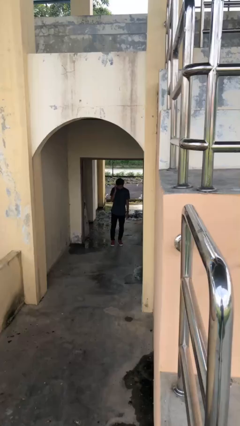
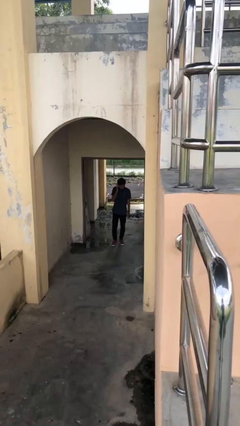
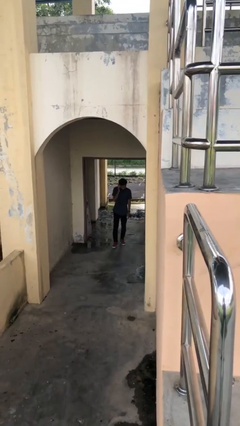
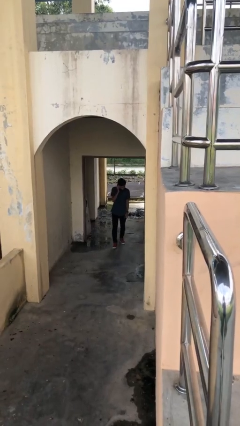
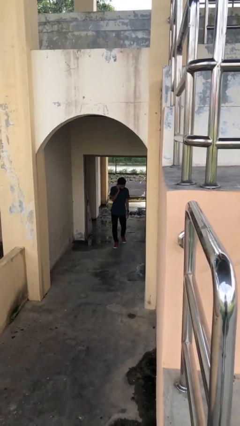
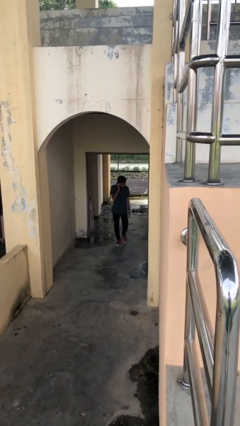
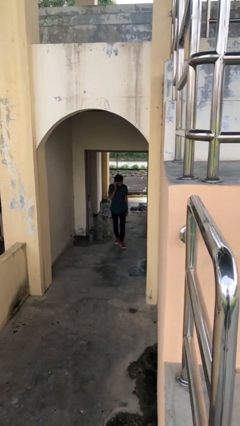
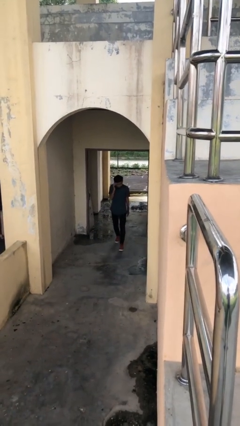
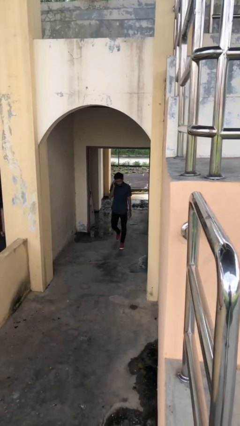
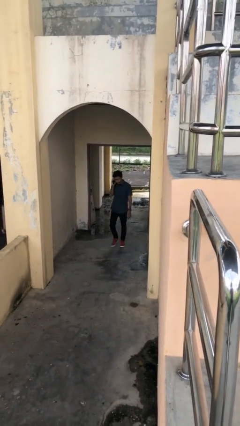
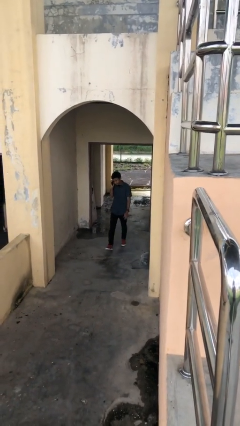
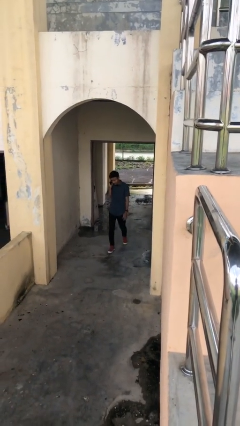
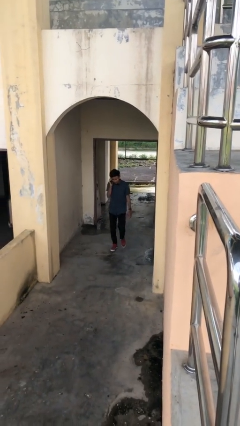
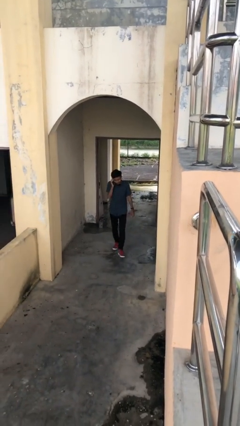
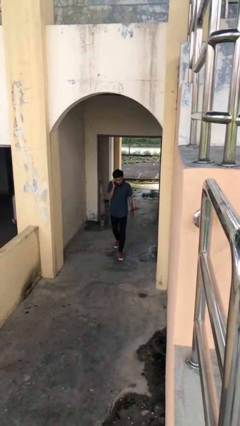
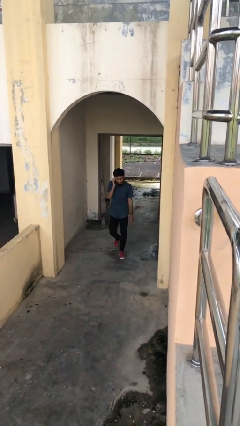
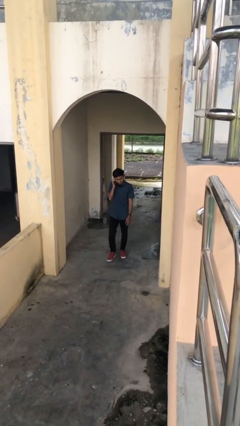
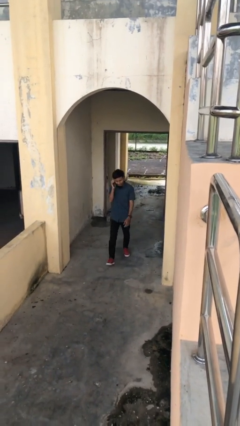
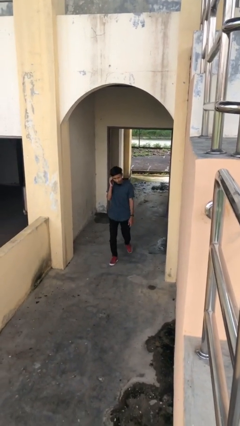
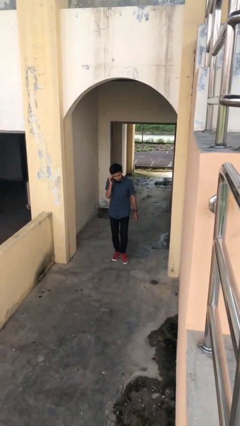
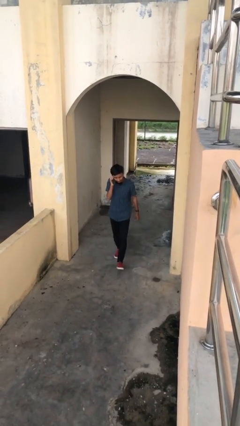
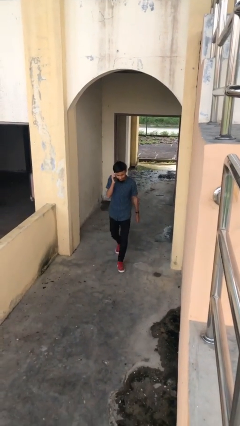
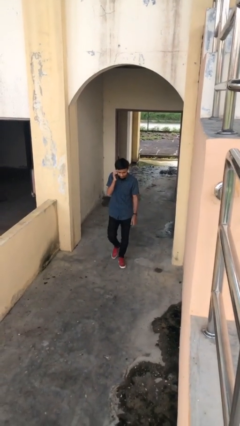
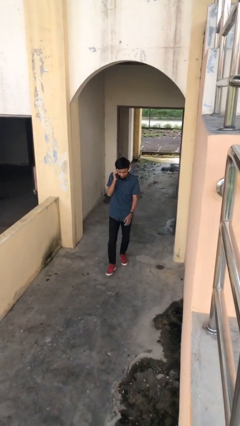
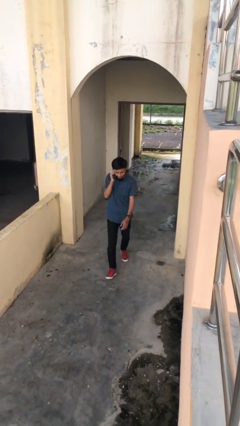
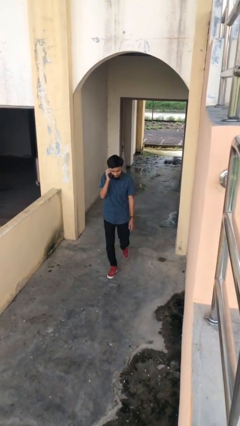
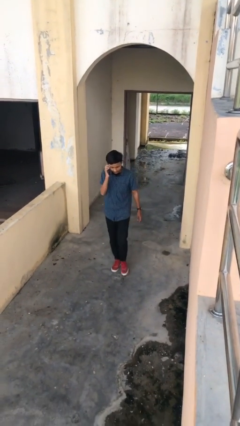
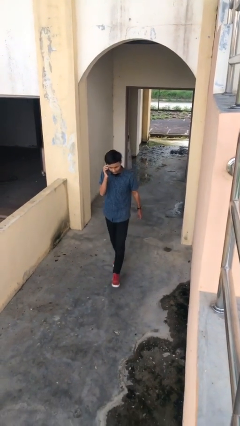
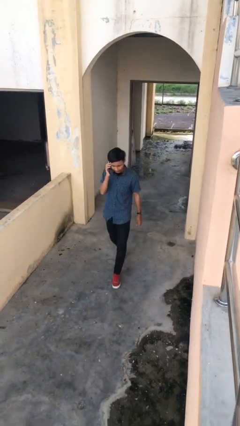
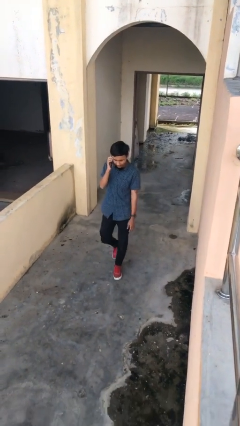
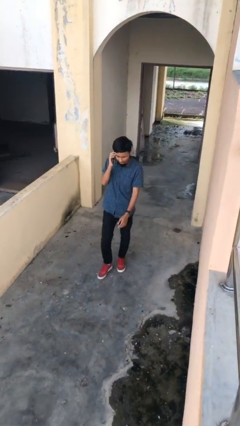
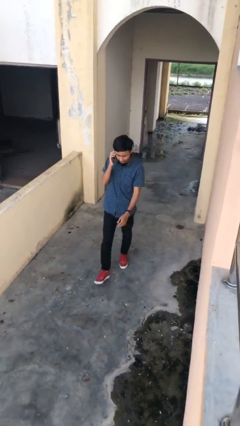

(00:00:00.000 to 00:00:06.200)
person enters scene through structure

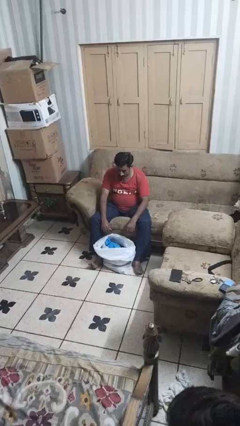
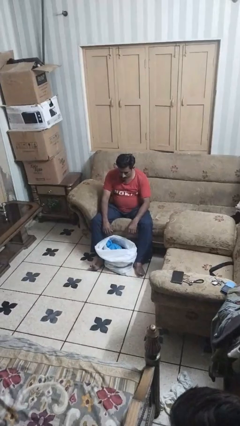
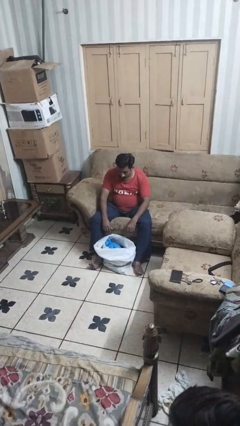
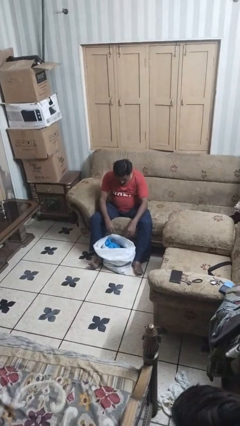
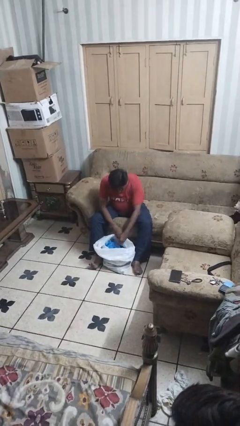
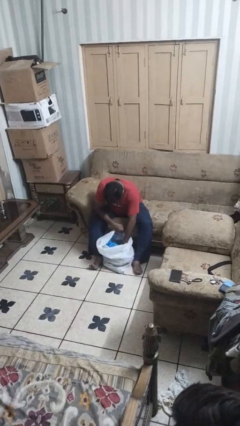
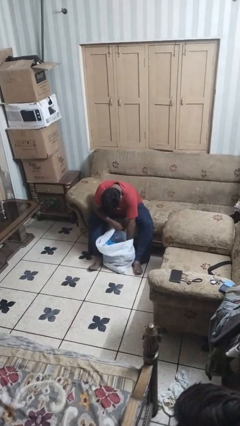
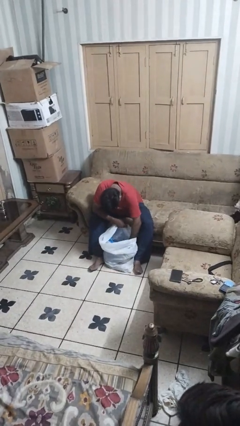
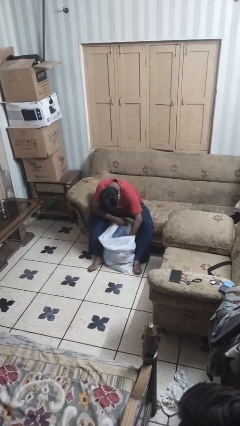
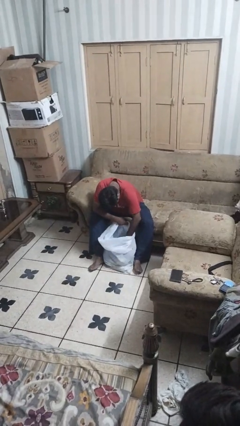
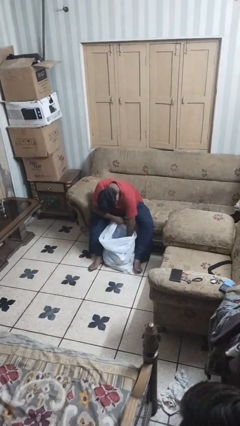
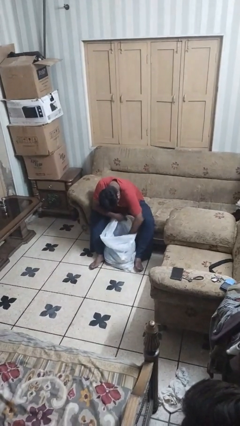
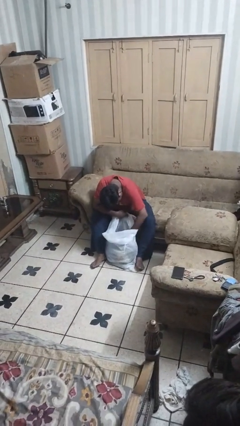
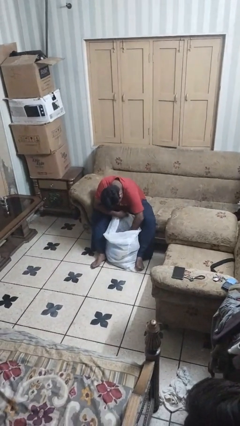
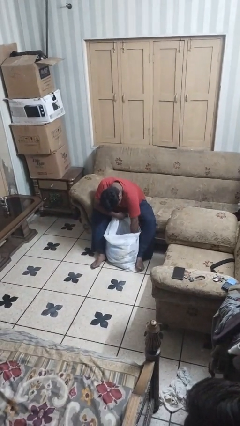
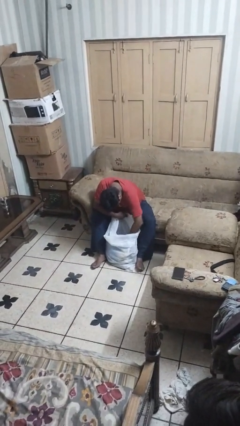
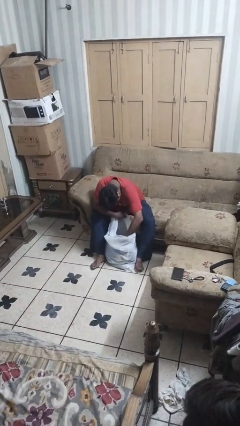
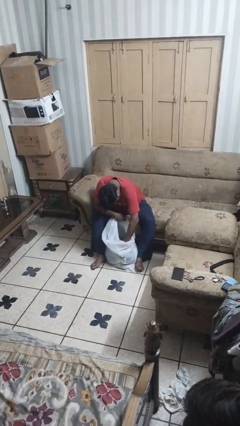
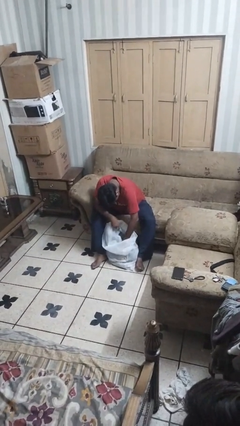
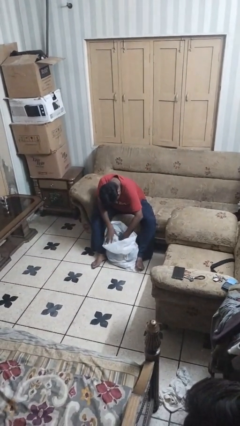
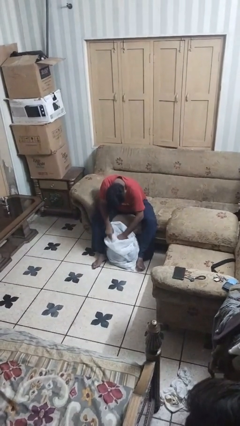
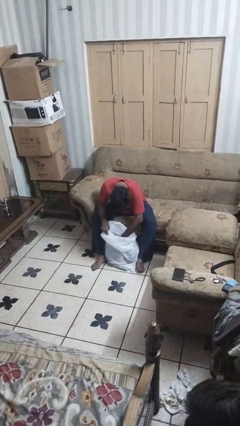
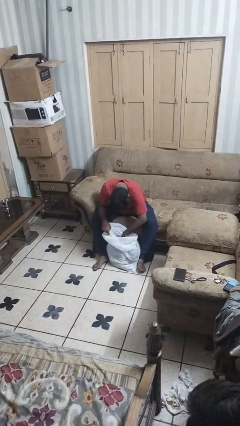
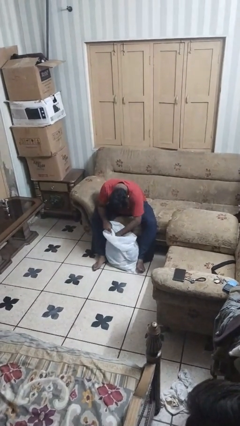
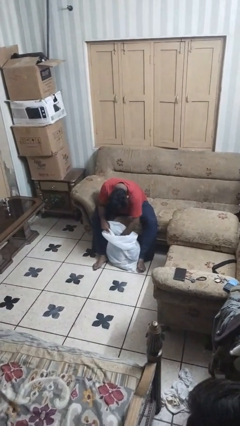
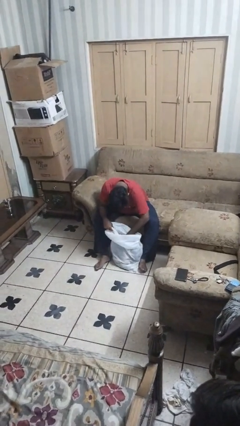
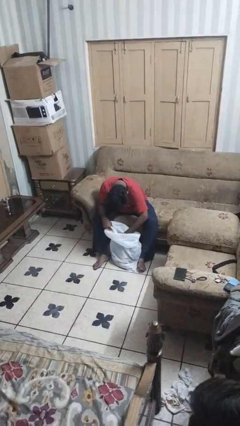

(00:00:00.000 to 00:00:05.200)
person searches in bag

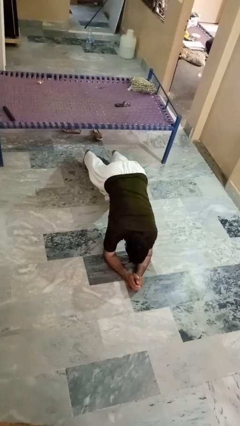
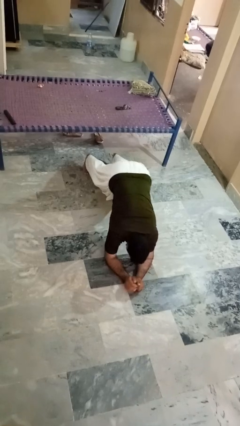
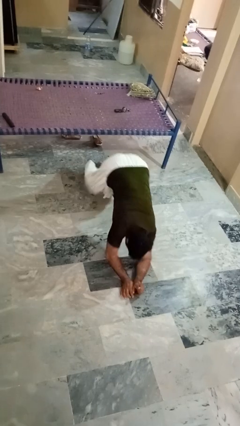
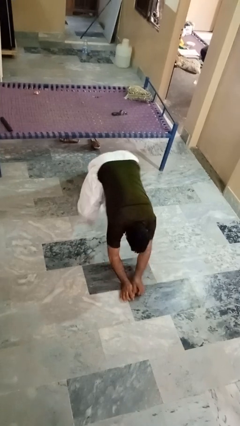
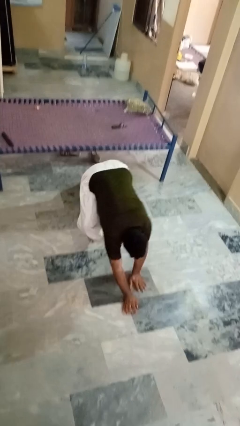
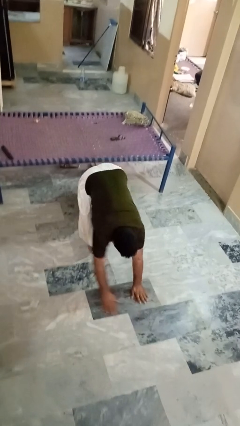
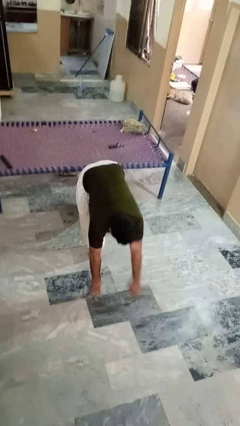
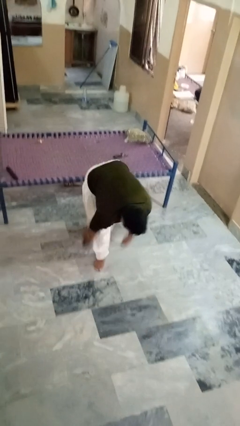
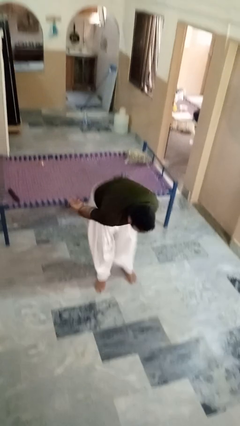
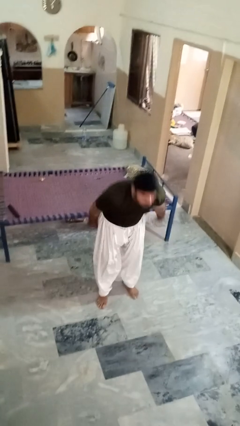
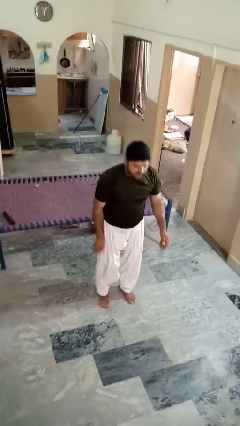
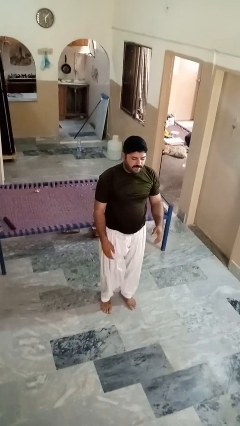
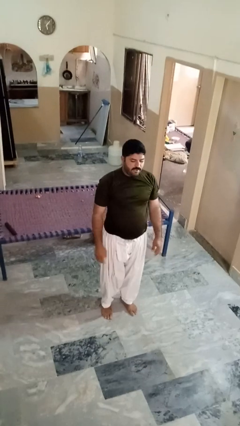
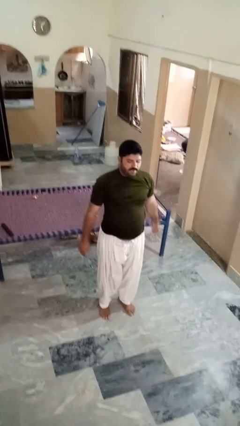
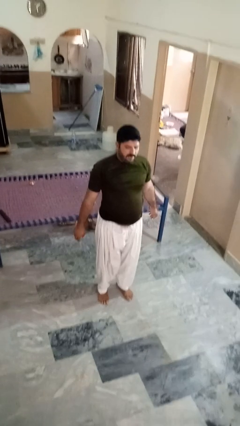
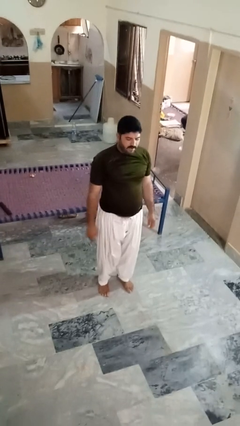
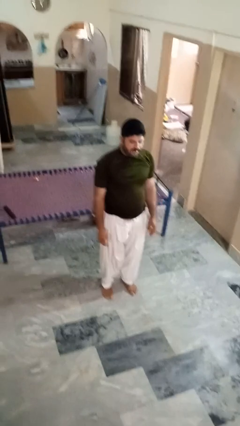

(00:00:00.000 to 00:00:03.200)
person stands up from floor

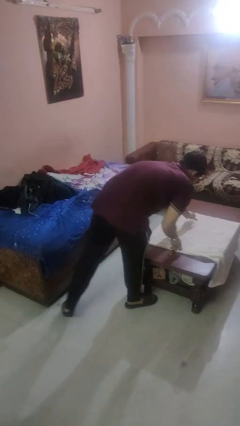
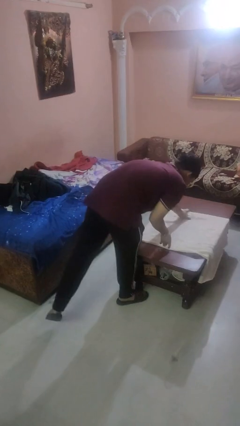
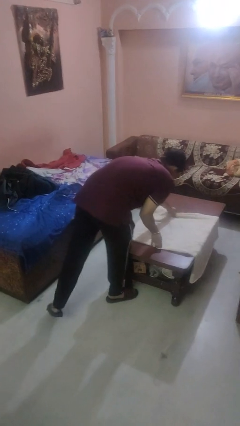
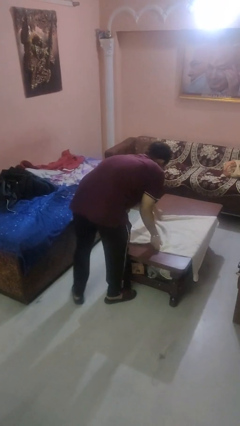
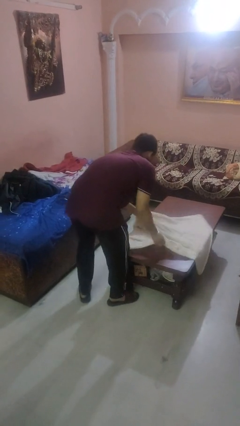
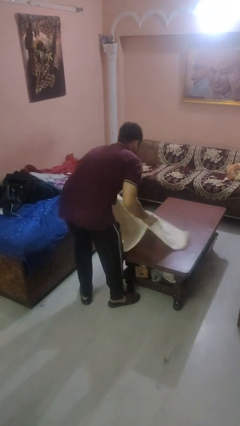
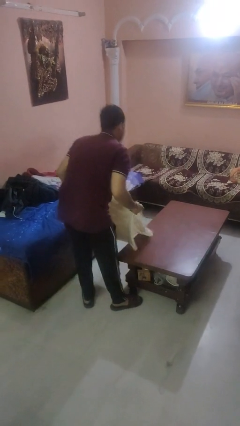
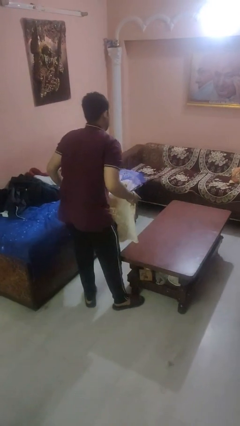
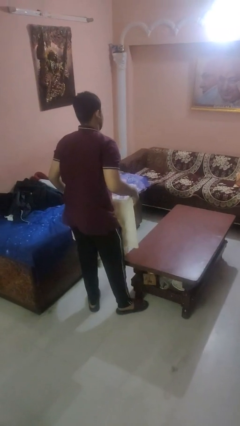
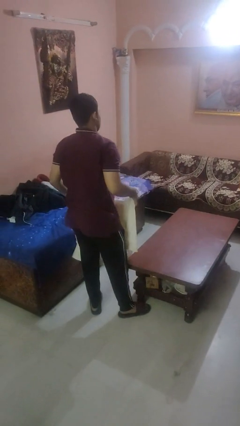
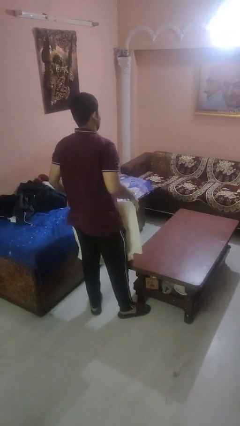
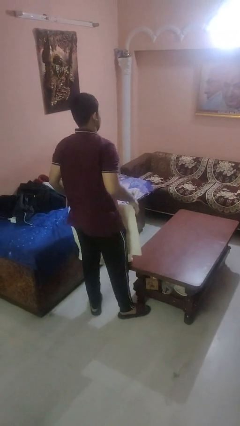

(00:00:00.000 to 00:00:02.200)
person folds tablecloth

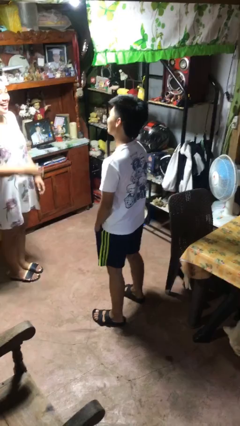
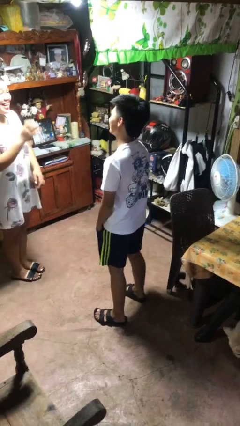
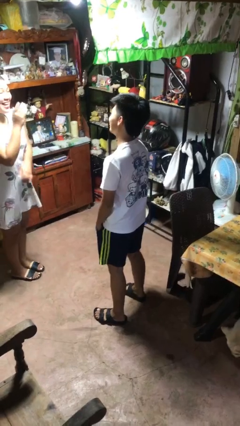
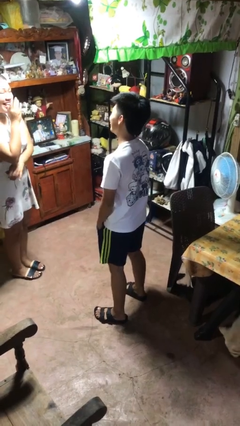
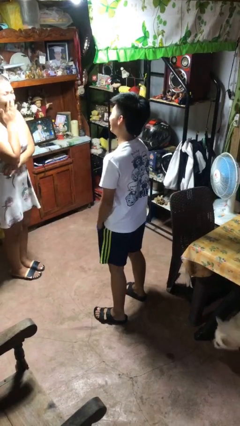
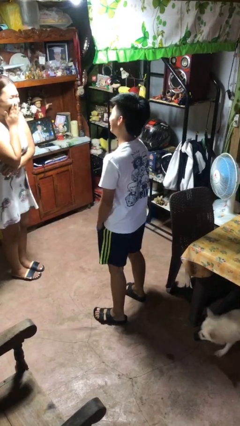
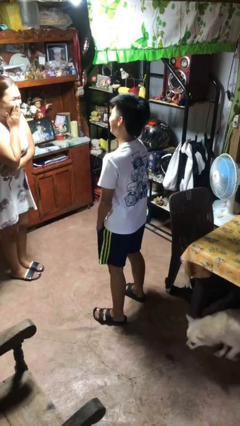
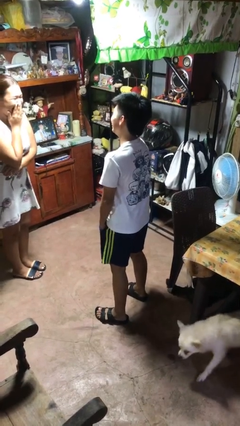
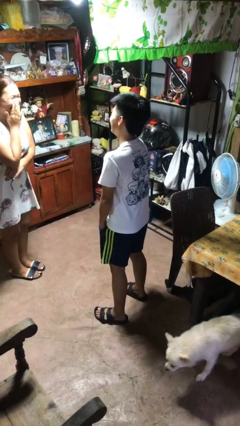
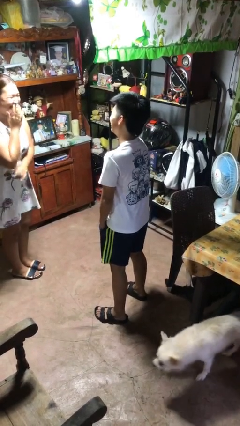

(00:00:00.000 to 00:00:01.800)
person laughs with person
